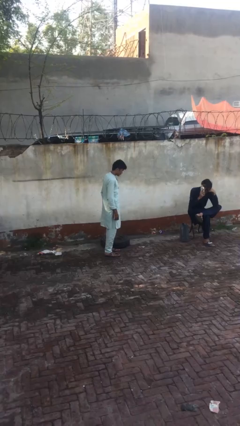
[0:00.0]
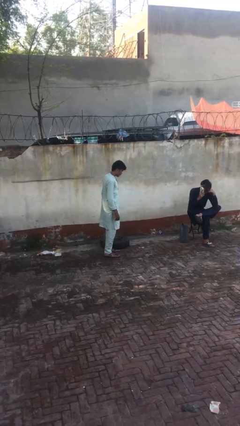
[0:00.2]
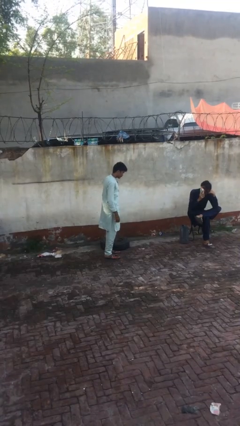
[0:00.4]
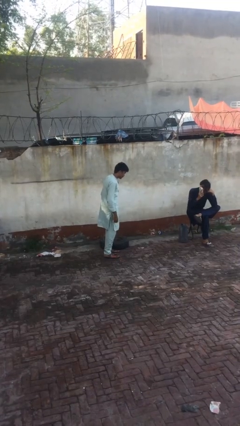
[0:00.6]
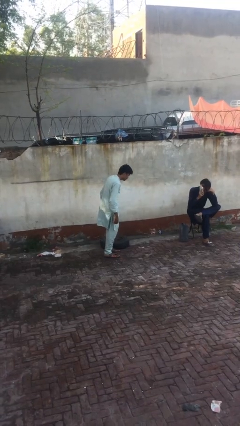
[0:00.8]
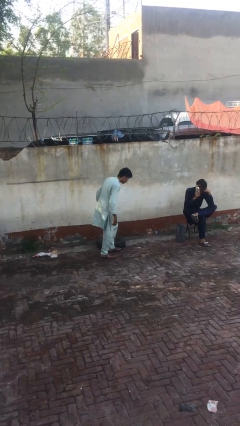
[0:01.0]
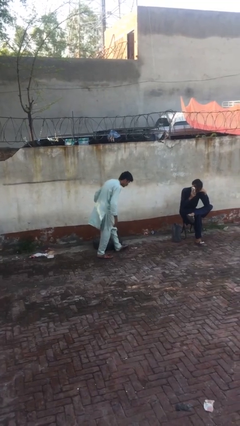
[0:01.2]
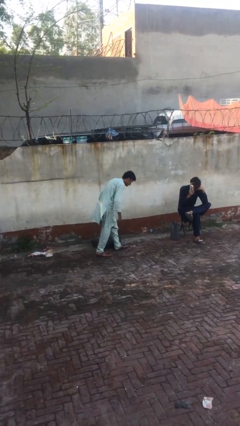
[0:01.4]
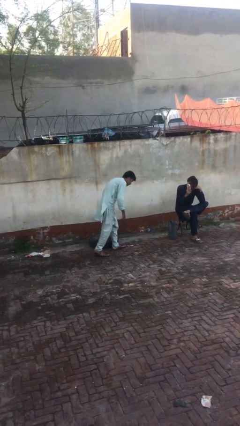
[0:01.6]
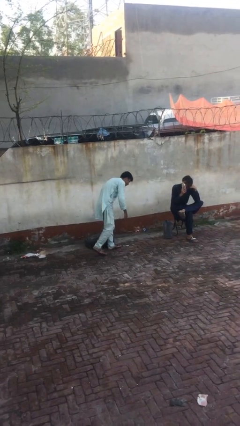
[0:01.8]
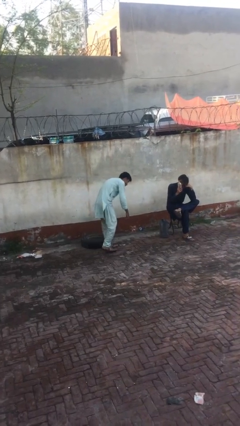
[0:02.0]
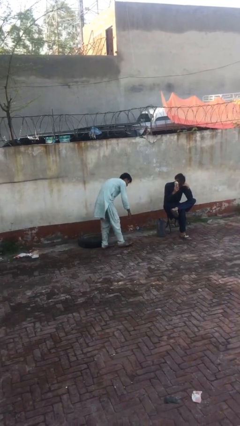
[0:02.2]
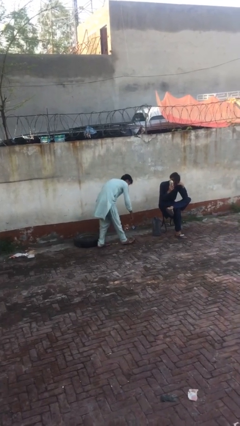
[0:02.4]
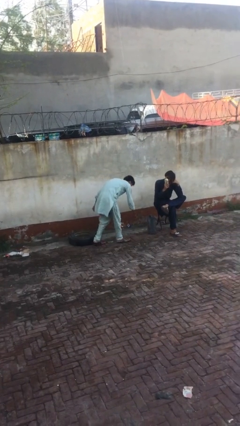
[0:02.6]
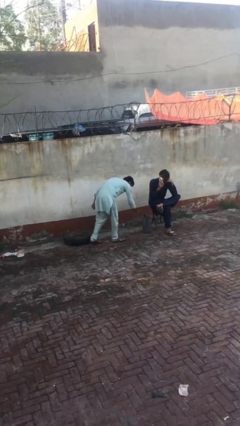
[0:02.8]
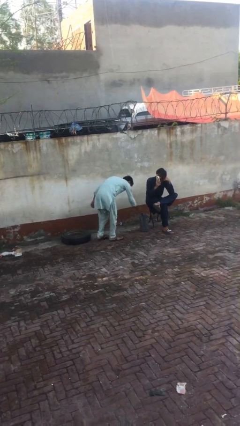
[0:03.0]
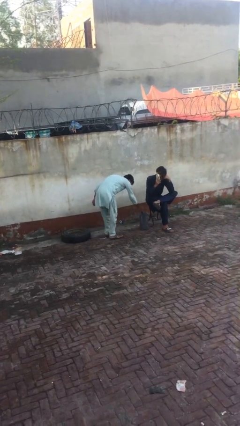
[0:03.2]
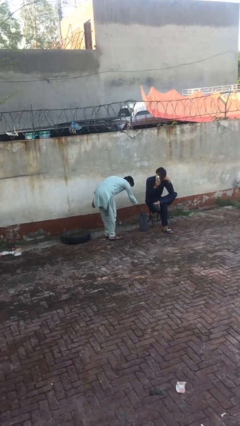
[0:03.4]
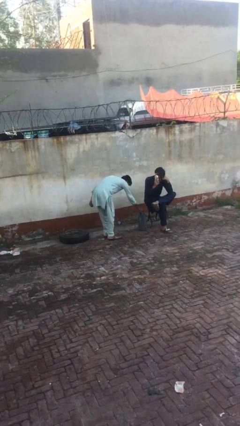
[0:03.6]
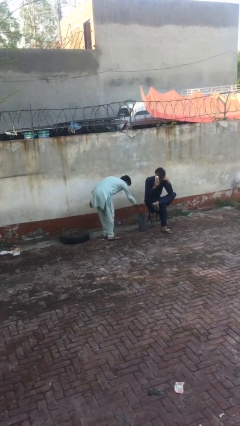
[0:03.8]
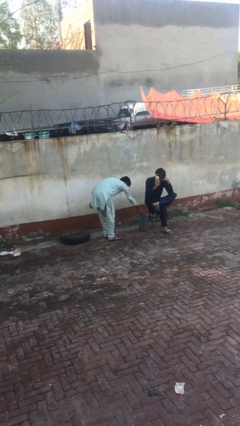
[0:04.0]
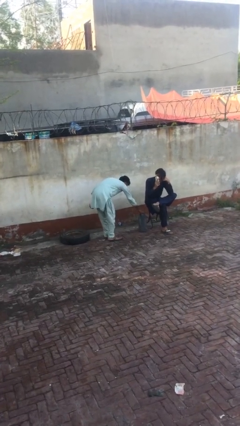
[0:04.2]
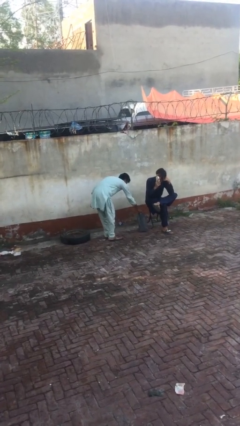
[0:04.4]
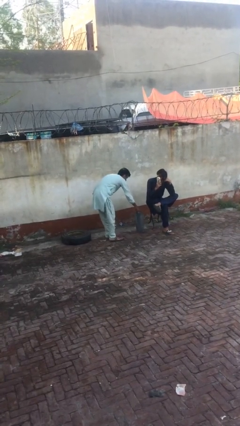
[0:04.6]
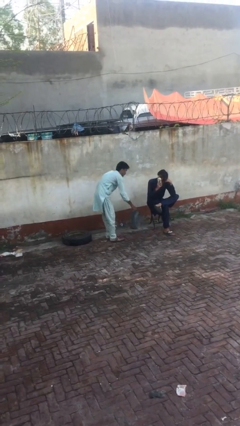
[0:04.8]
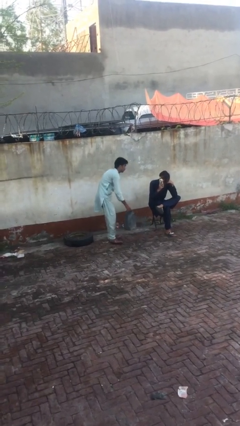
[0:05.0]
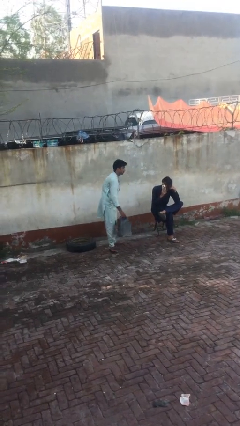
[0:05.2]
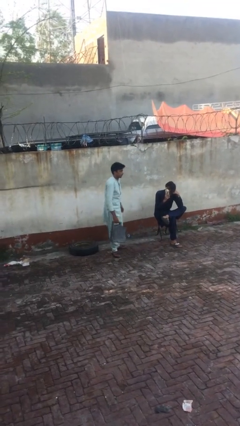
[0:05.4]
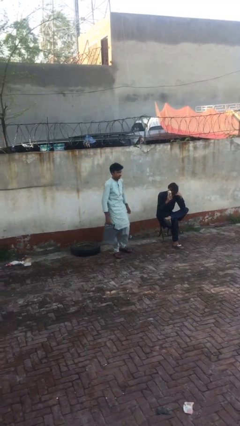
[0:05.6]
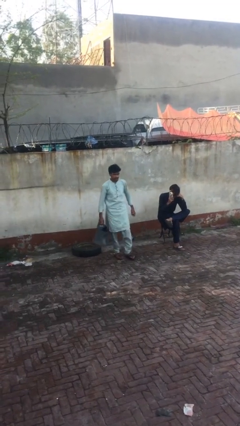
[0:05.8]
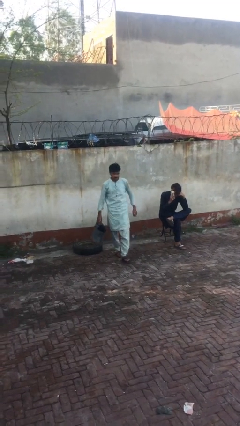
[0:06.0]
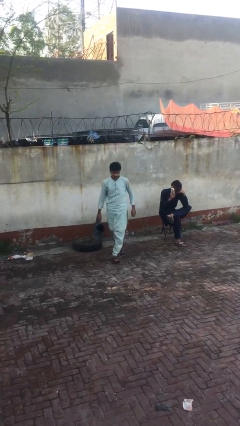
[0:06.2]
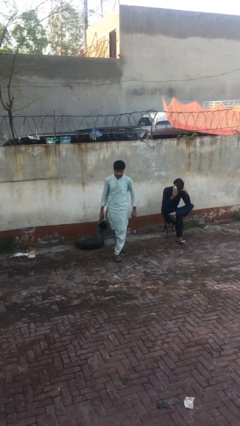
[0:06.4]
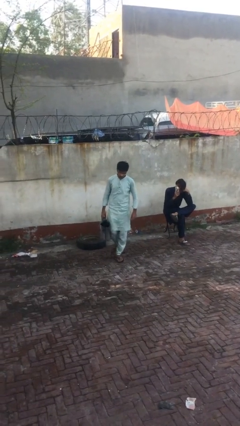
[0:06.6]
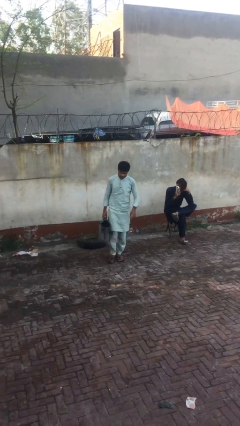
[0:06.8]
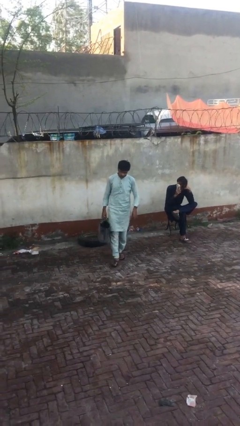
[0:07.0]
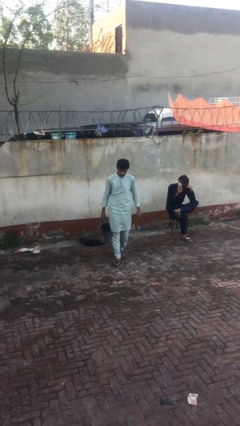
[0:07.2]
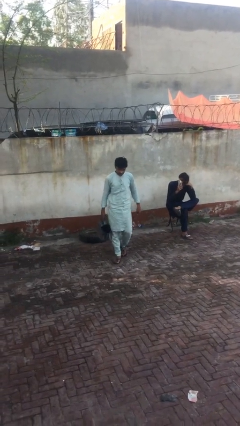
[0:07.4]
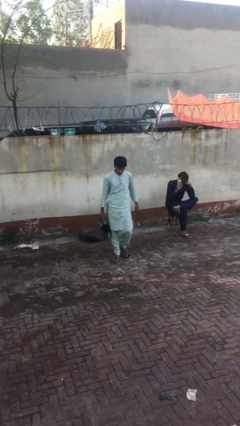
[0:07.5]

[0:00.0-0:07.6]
person steals object from person

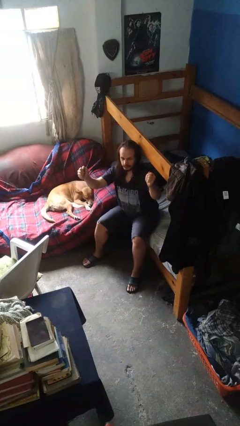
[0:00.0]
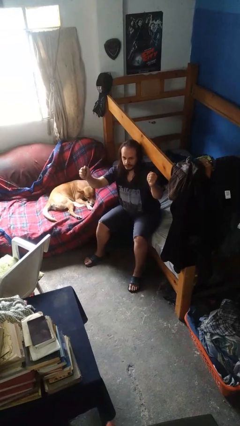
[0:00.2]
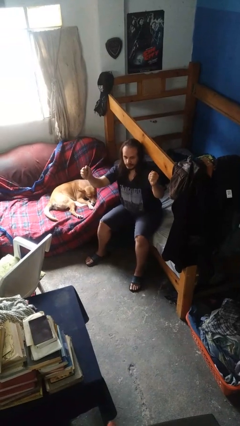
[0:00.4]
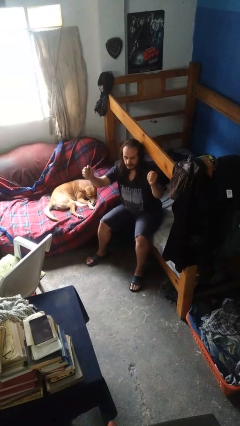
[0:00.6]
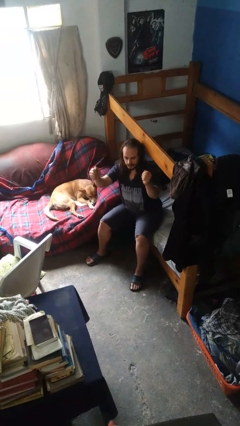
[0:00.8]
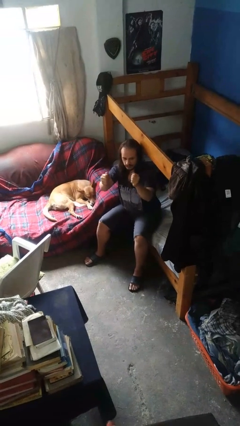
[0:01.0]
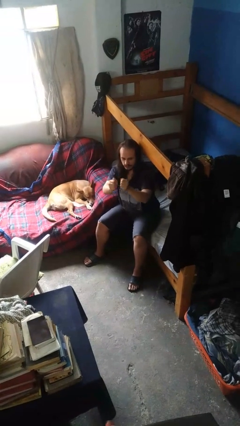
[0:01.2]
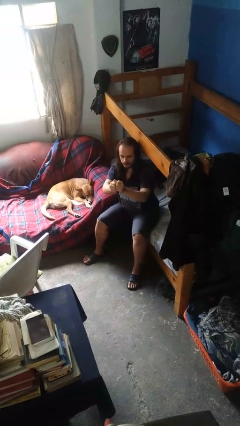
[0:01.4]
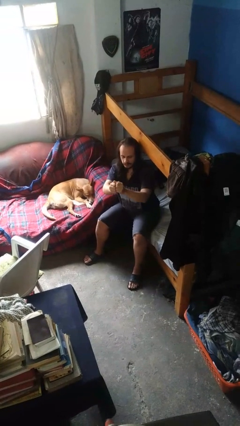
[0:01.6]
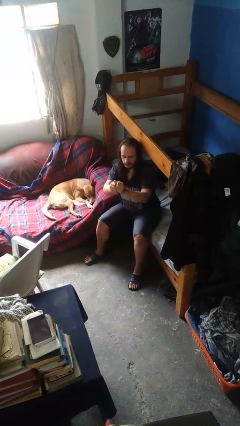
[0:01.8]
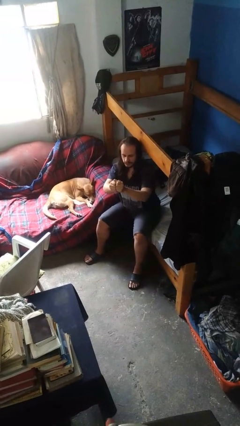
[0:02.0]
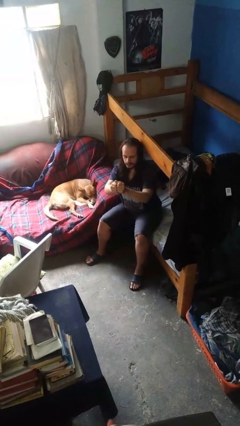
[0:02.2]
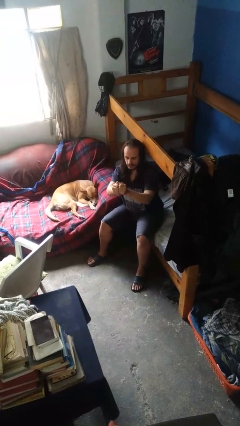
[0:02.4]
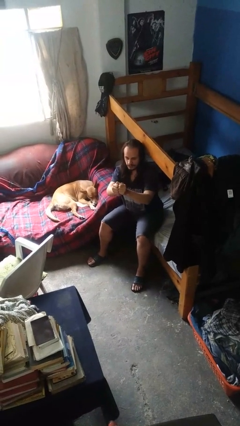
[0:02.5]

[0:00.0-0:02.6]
person gestures zoom out

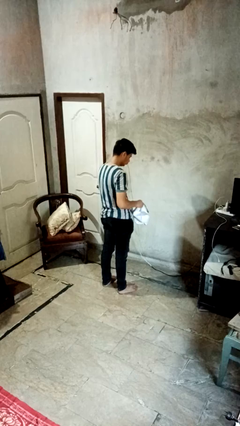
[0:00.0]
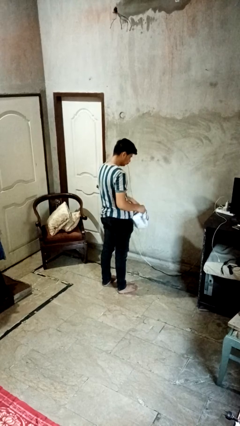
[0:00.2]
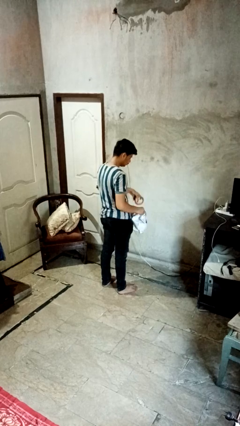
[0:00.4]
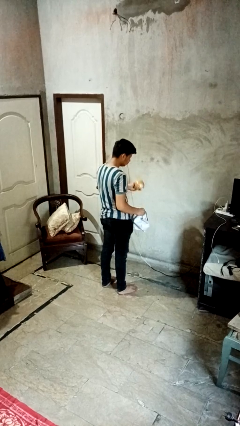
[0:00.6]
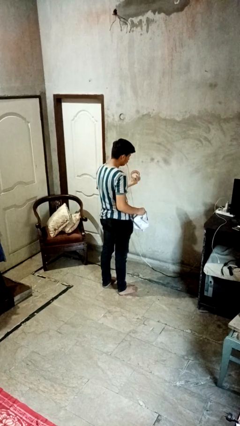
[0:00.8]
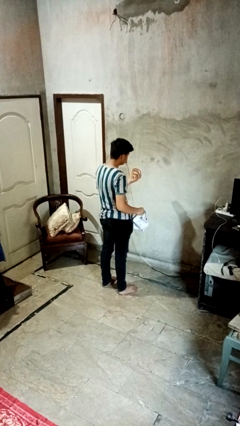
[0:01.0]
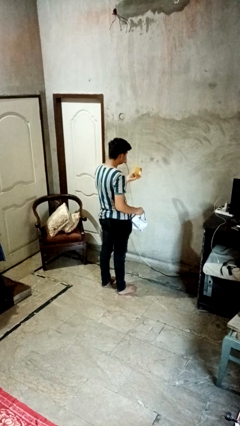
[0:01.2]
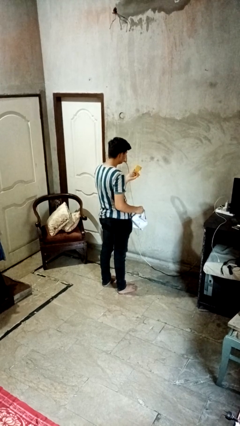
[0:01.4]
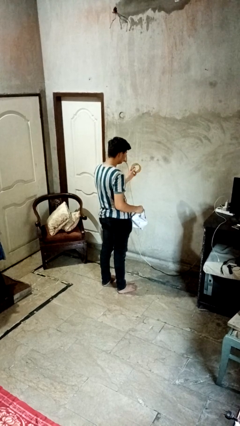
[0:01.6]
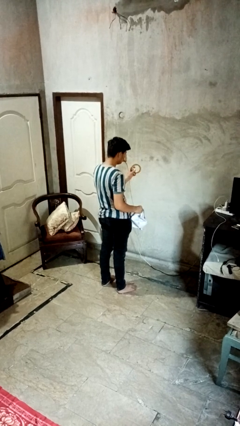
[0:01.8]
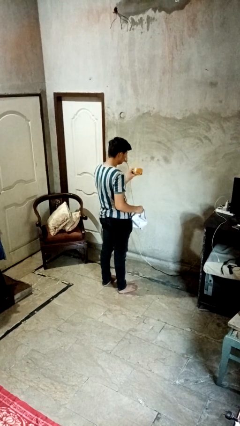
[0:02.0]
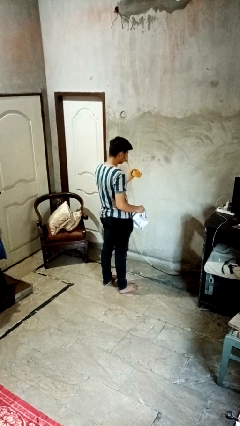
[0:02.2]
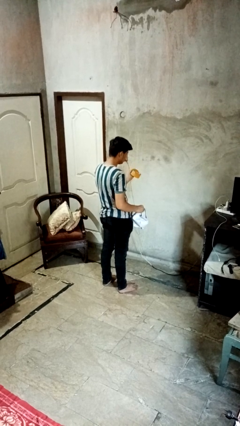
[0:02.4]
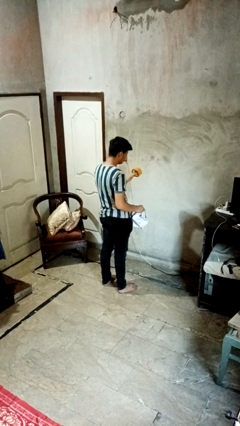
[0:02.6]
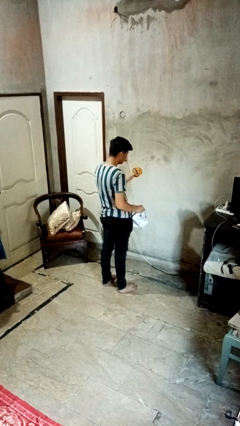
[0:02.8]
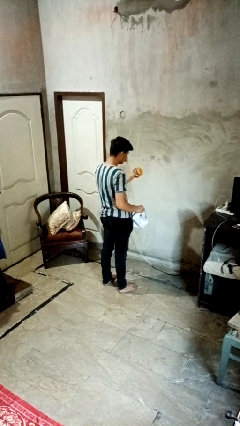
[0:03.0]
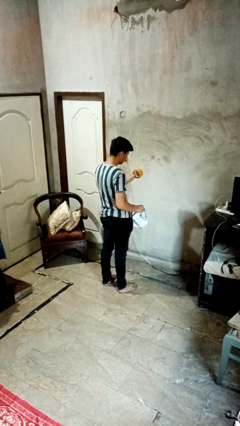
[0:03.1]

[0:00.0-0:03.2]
person searches in bag

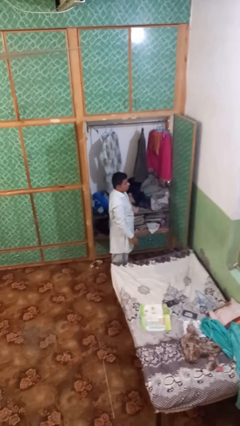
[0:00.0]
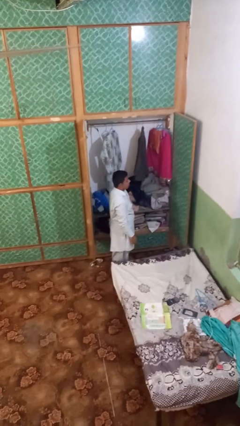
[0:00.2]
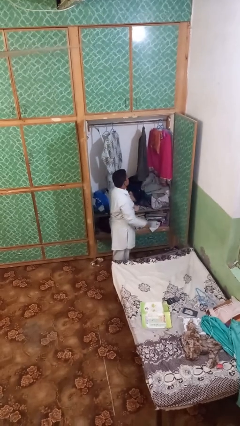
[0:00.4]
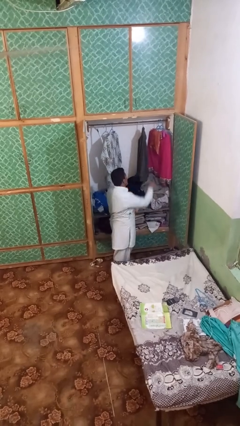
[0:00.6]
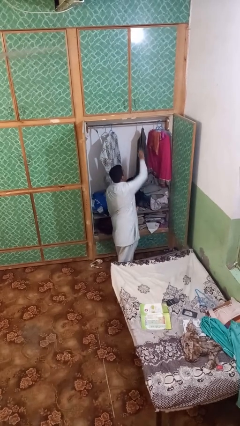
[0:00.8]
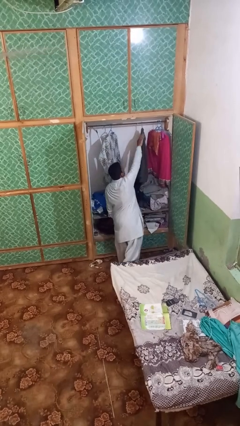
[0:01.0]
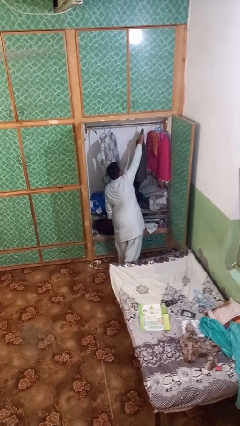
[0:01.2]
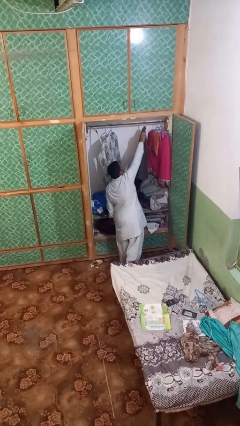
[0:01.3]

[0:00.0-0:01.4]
person takes clothes from closet

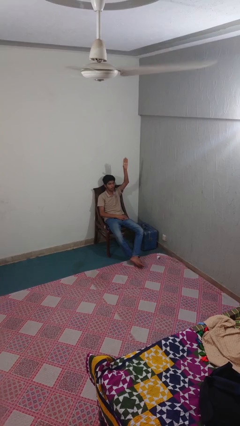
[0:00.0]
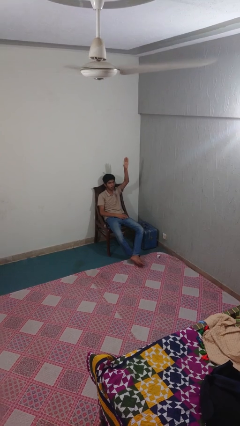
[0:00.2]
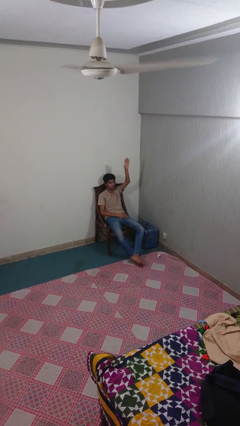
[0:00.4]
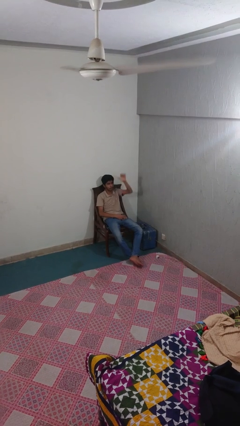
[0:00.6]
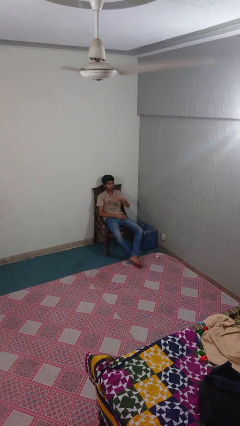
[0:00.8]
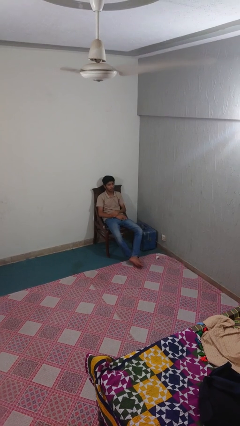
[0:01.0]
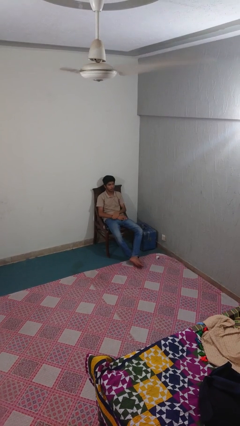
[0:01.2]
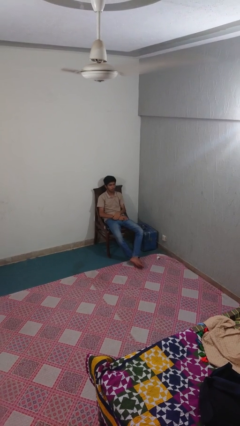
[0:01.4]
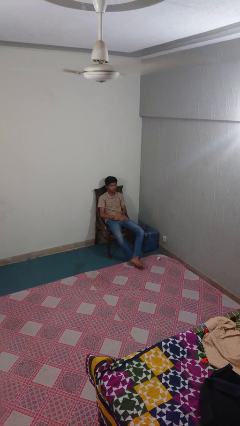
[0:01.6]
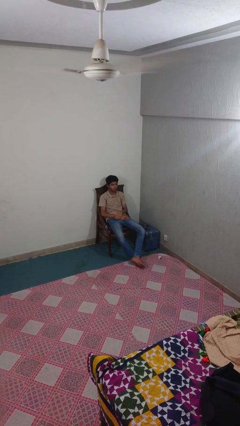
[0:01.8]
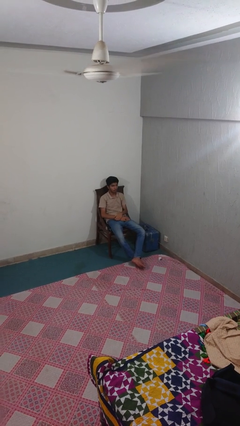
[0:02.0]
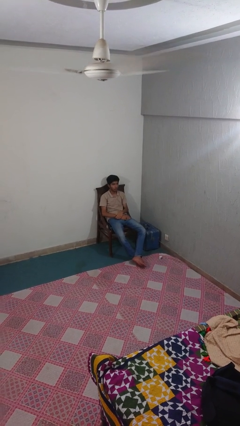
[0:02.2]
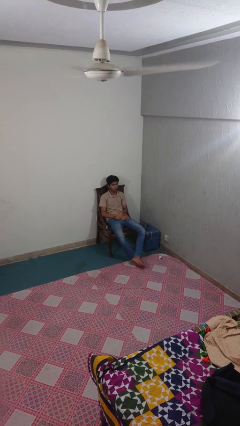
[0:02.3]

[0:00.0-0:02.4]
person gestures lower hand

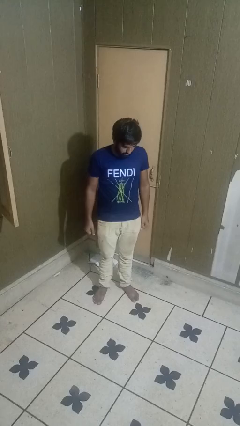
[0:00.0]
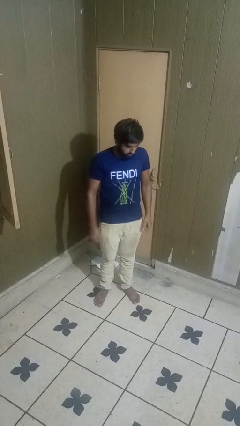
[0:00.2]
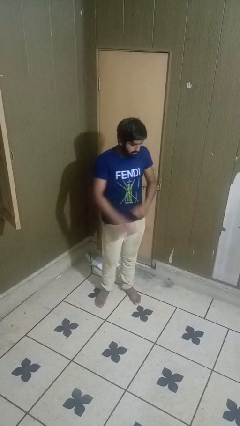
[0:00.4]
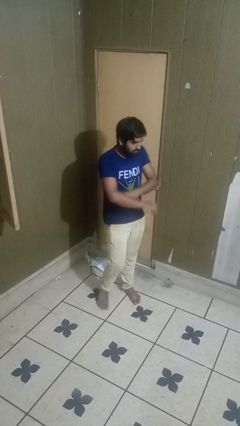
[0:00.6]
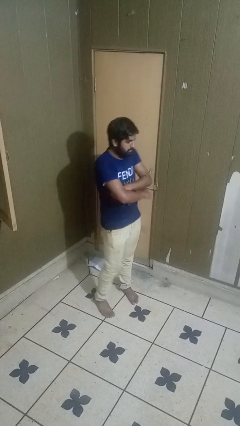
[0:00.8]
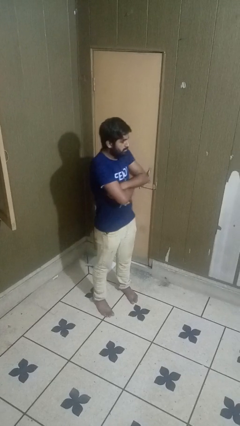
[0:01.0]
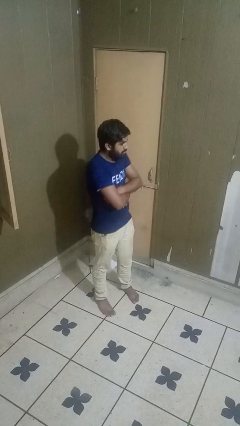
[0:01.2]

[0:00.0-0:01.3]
person crosses arms
